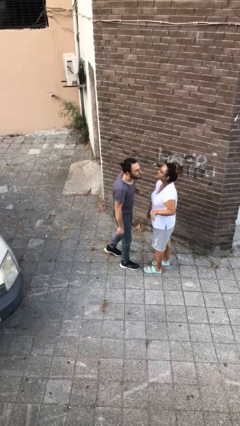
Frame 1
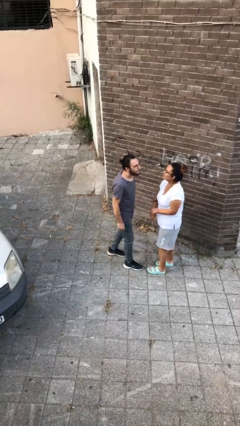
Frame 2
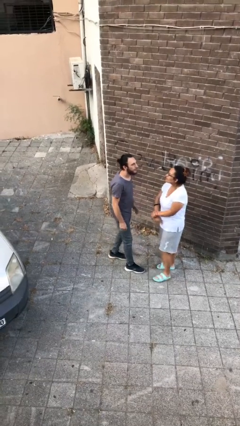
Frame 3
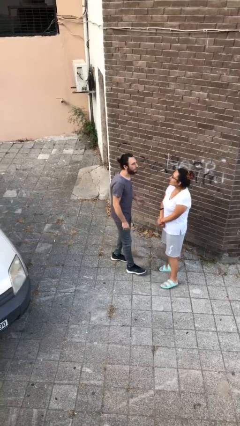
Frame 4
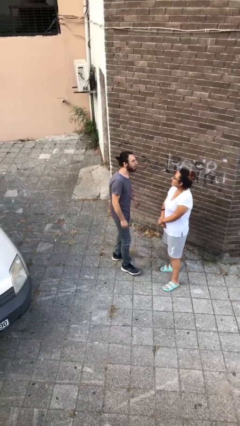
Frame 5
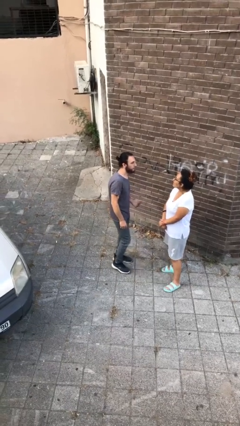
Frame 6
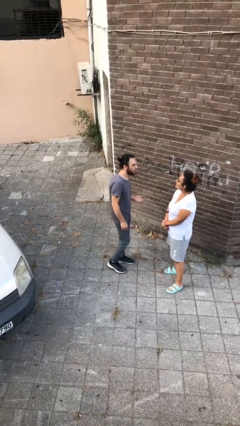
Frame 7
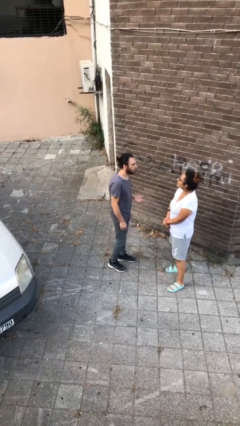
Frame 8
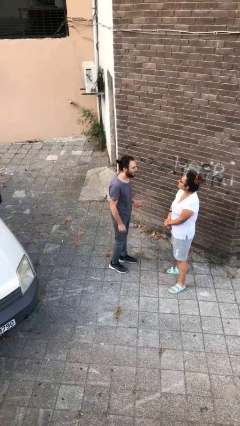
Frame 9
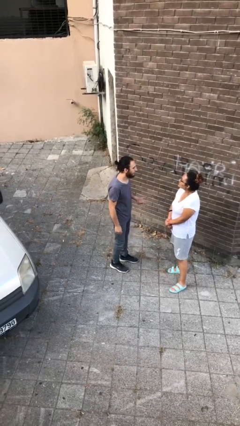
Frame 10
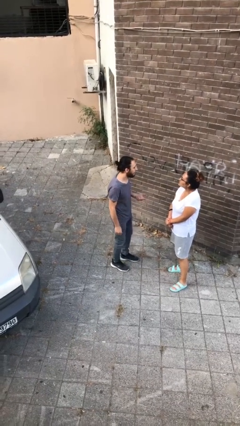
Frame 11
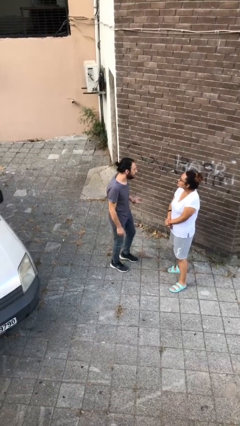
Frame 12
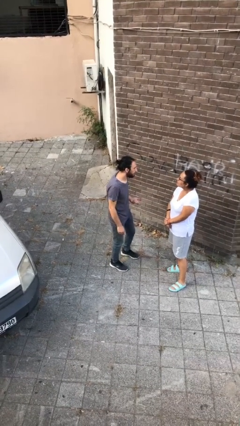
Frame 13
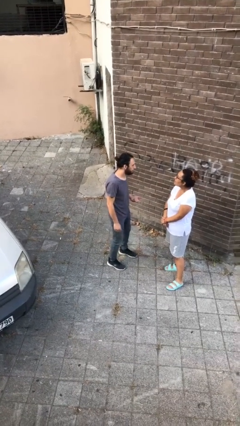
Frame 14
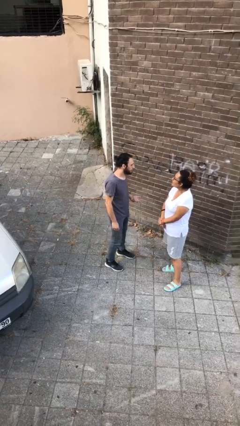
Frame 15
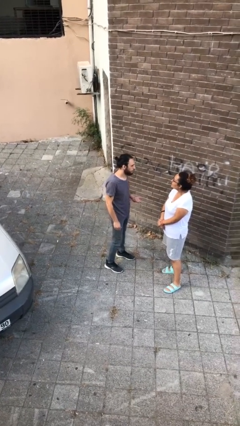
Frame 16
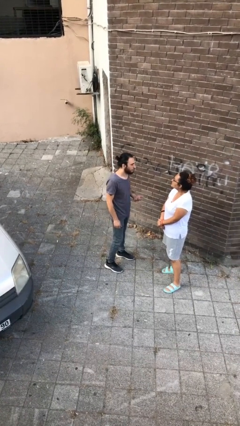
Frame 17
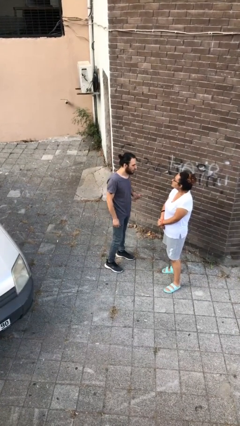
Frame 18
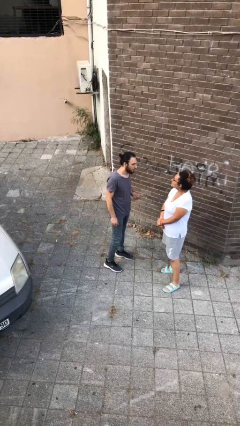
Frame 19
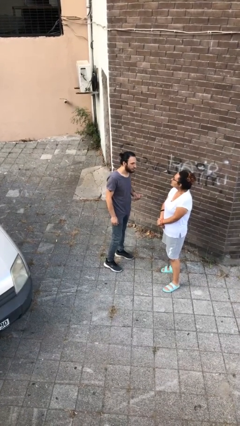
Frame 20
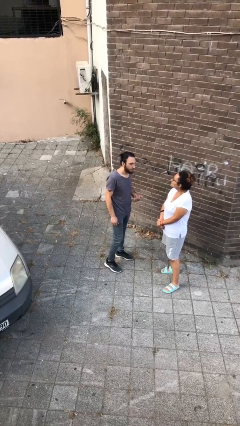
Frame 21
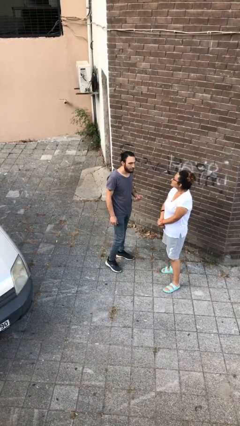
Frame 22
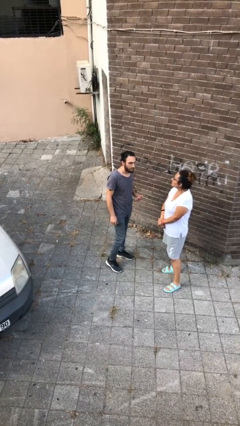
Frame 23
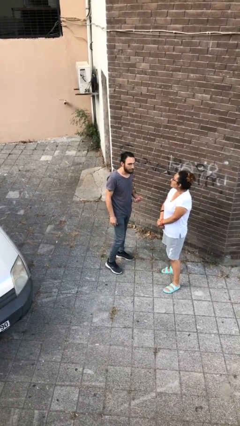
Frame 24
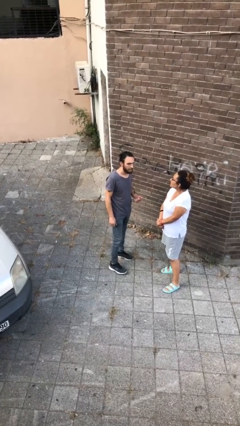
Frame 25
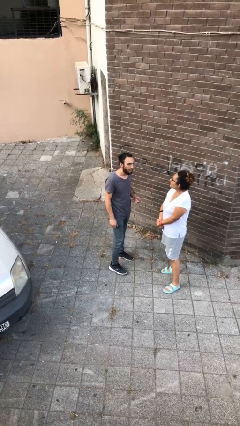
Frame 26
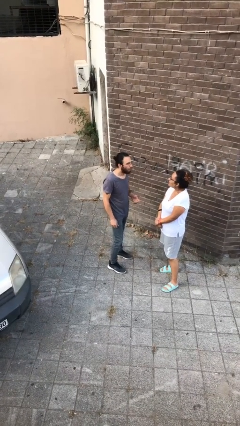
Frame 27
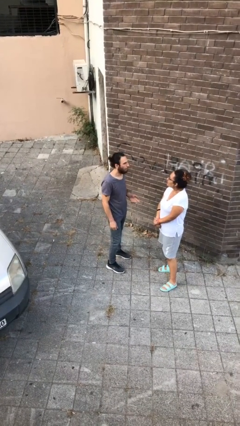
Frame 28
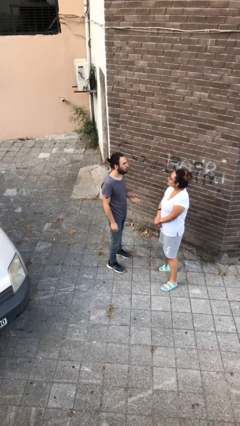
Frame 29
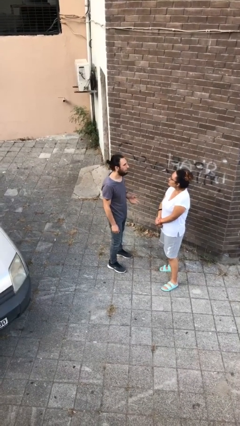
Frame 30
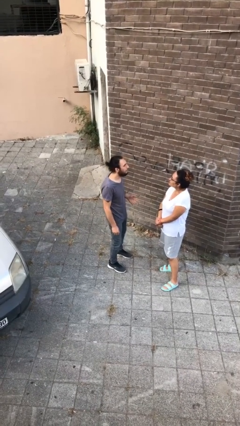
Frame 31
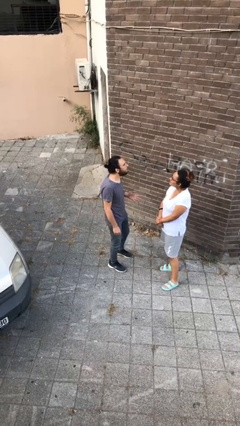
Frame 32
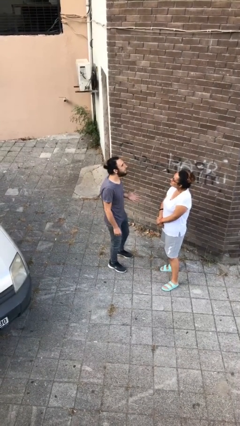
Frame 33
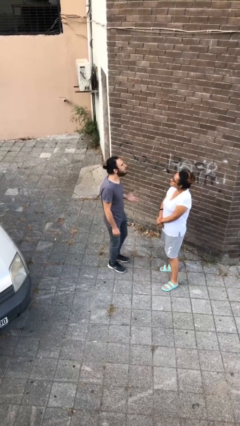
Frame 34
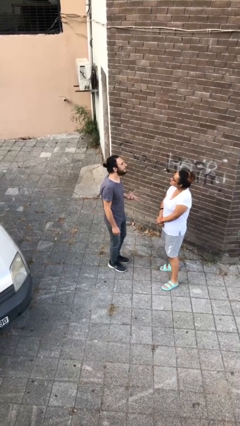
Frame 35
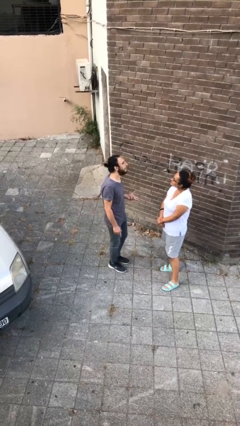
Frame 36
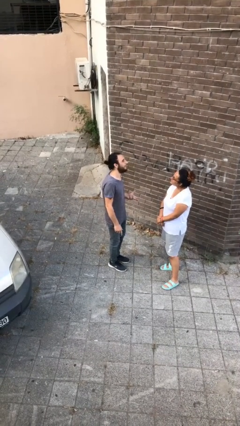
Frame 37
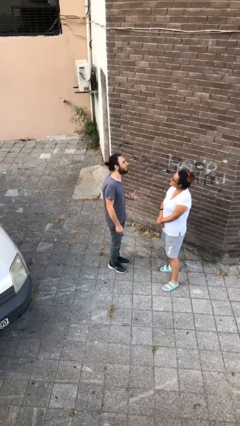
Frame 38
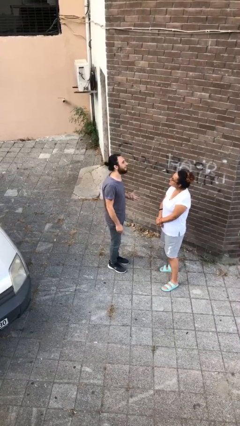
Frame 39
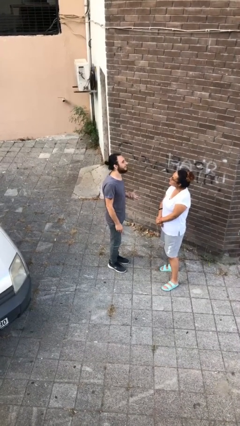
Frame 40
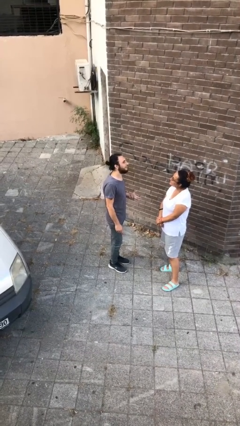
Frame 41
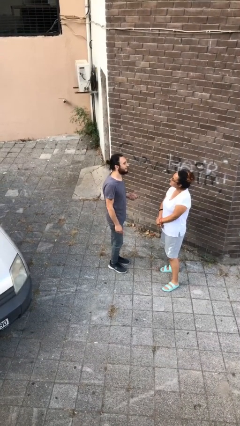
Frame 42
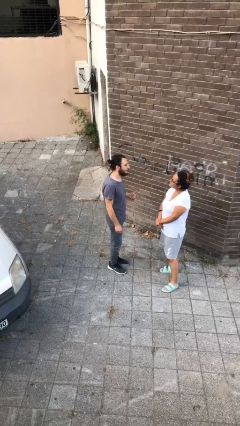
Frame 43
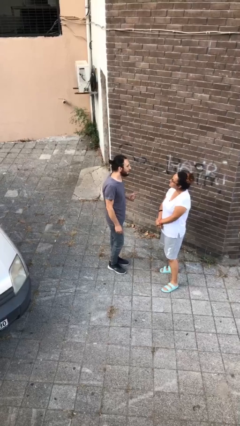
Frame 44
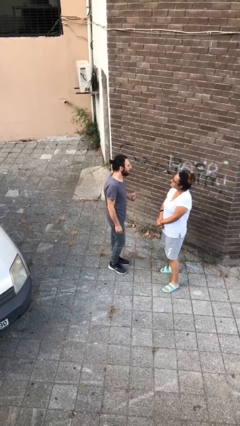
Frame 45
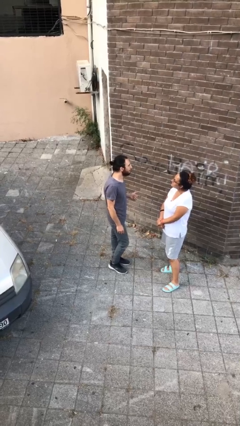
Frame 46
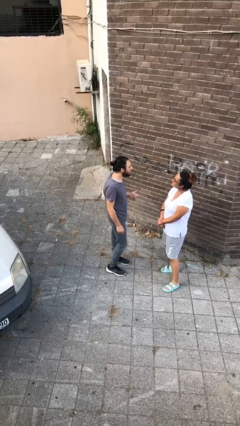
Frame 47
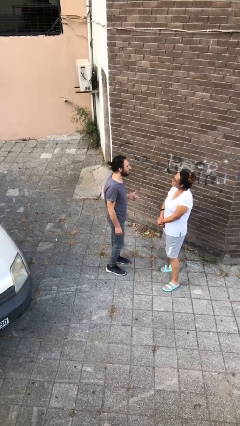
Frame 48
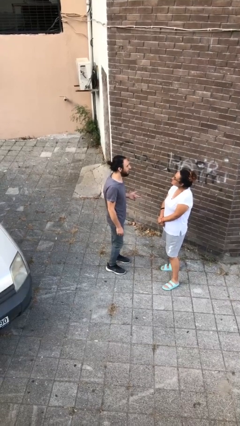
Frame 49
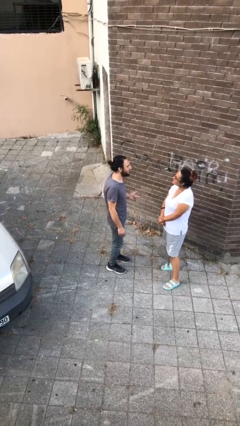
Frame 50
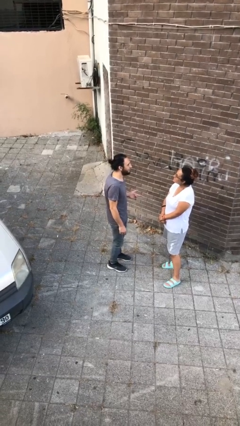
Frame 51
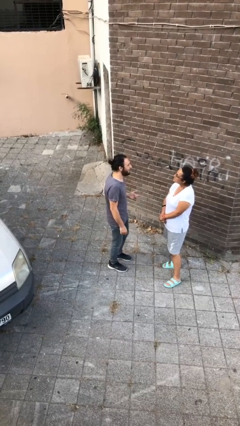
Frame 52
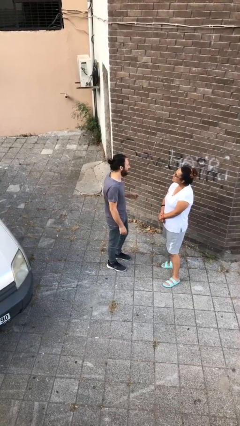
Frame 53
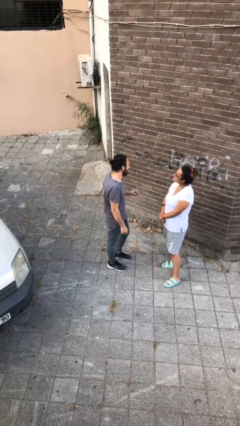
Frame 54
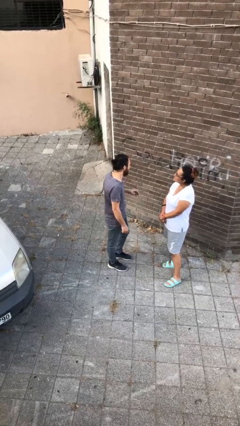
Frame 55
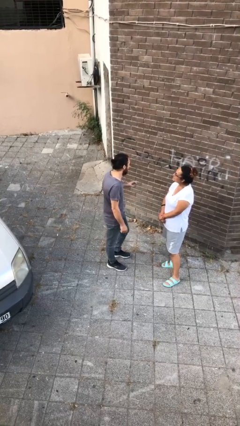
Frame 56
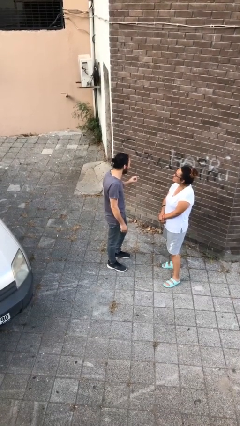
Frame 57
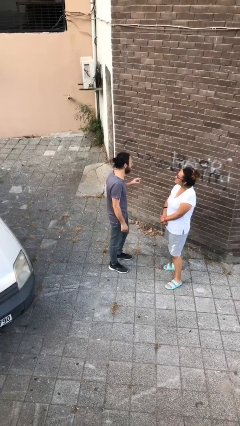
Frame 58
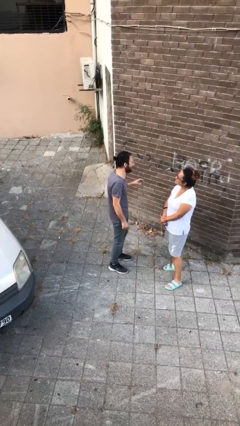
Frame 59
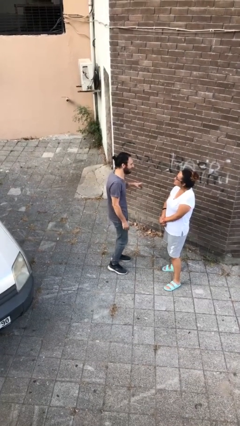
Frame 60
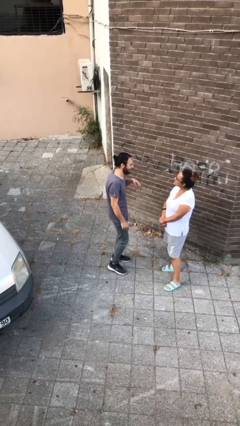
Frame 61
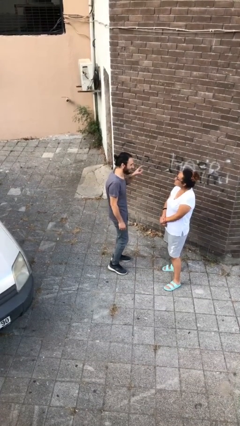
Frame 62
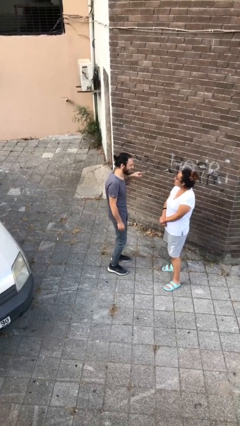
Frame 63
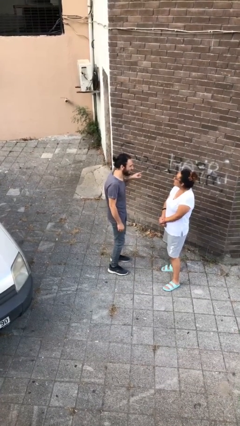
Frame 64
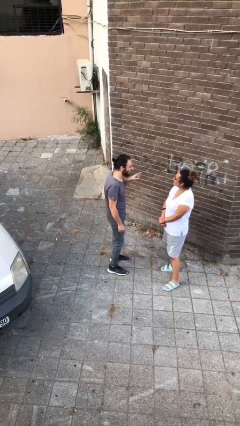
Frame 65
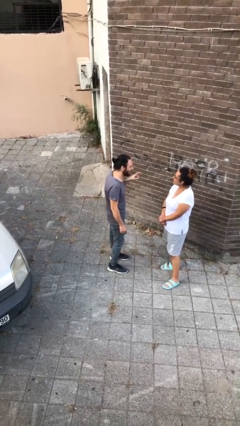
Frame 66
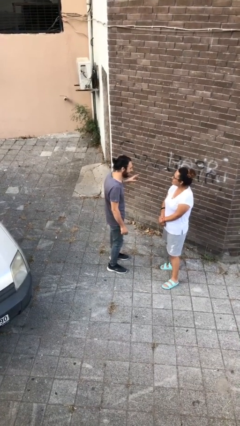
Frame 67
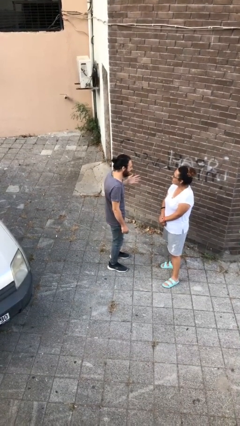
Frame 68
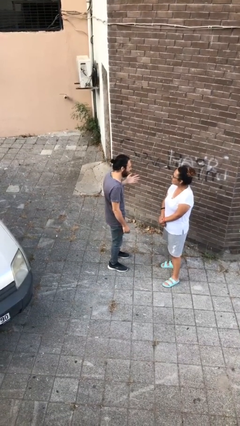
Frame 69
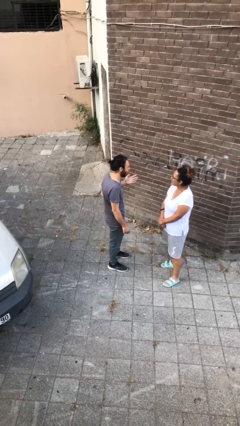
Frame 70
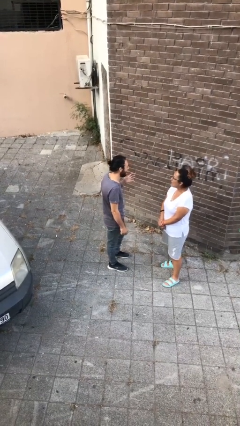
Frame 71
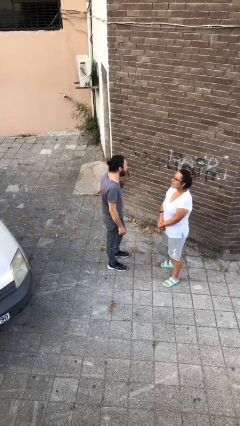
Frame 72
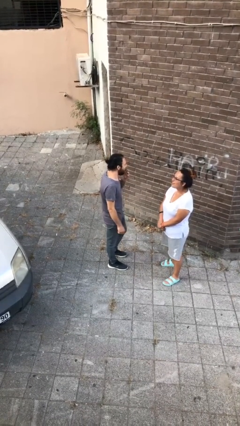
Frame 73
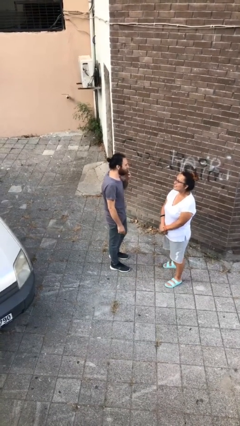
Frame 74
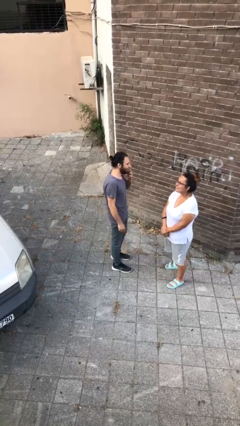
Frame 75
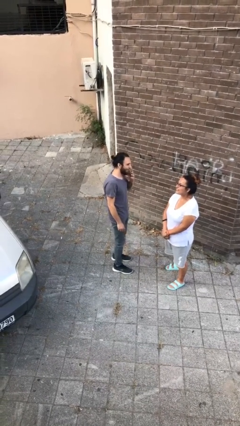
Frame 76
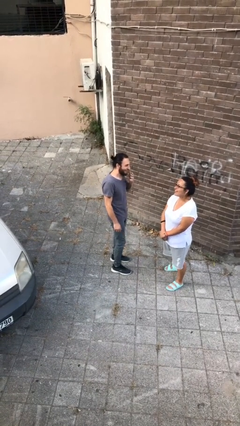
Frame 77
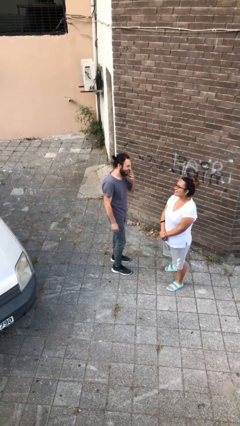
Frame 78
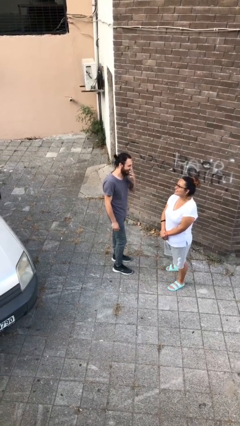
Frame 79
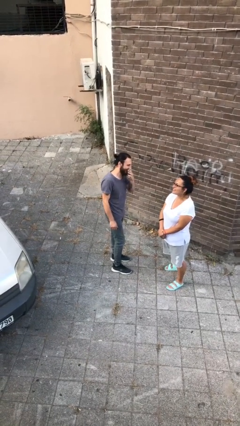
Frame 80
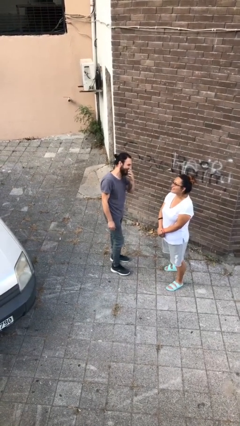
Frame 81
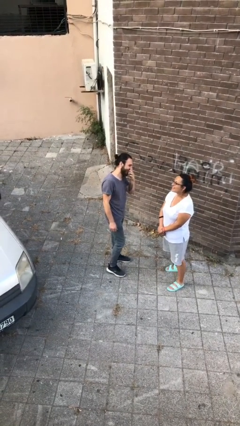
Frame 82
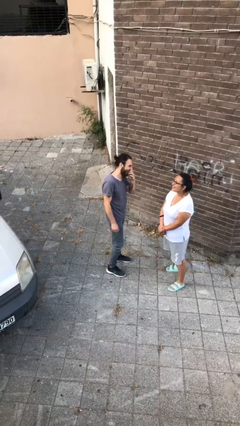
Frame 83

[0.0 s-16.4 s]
person talks to person

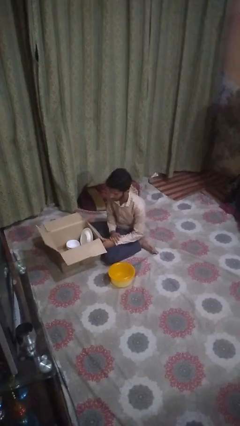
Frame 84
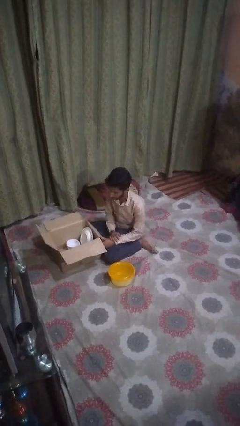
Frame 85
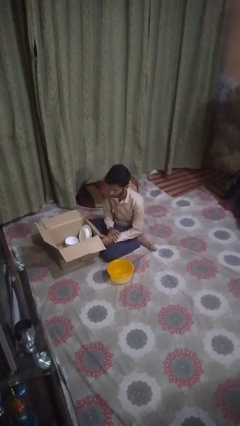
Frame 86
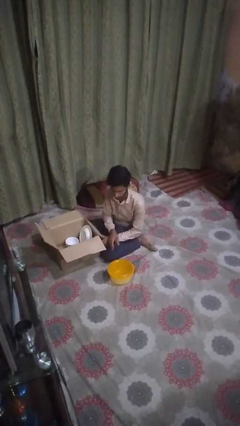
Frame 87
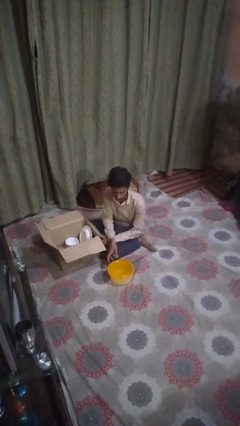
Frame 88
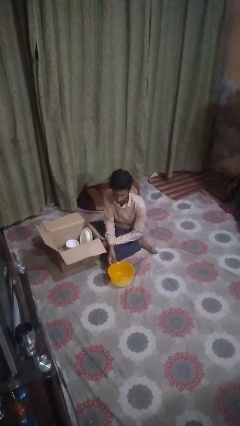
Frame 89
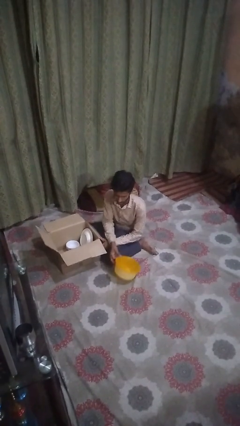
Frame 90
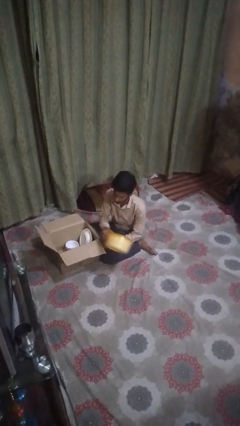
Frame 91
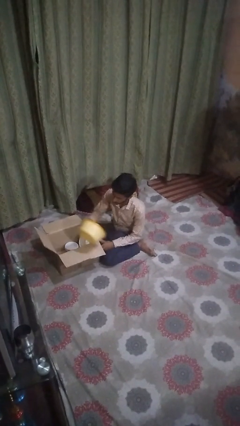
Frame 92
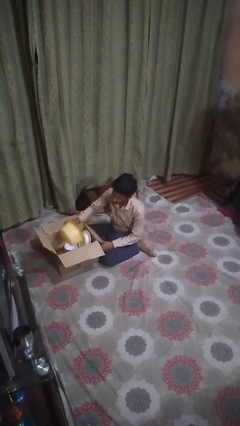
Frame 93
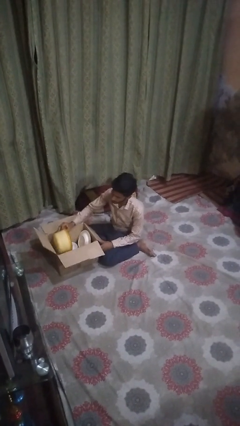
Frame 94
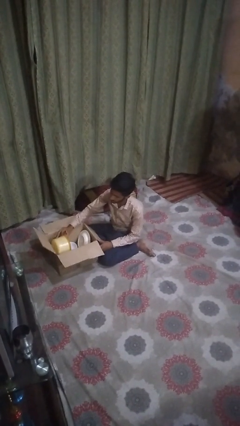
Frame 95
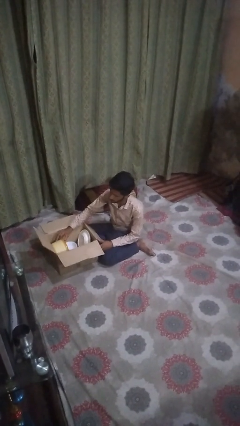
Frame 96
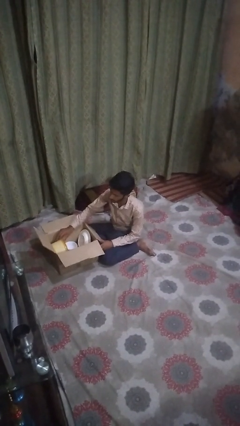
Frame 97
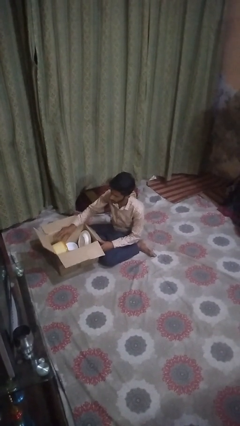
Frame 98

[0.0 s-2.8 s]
person puts object into box
